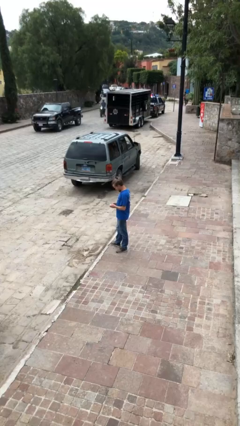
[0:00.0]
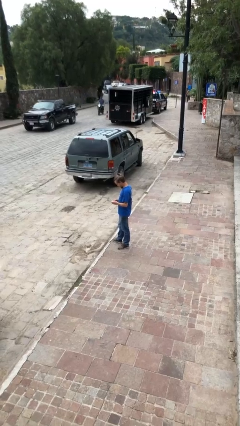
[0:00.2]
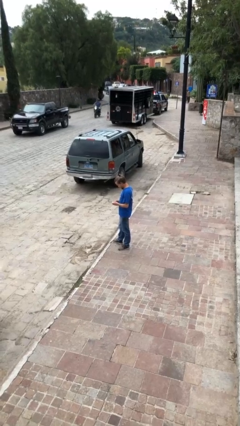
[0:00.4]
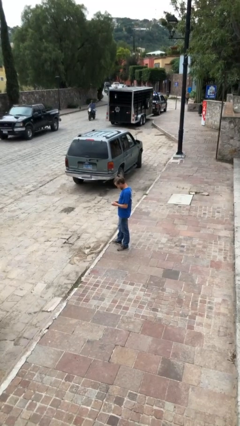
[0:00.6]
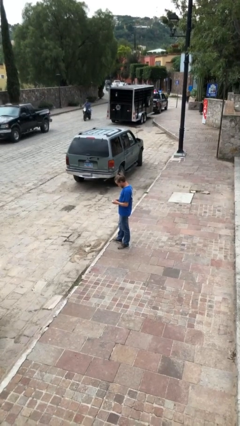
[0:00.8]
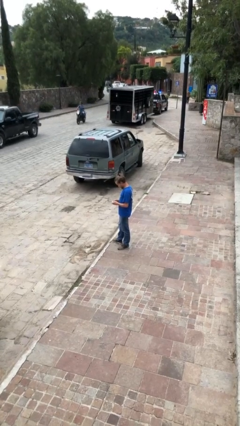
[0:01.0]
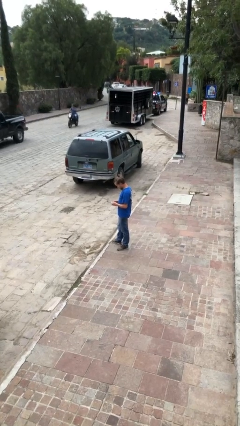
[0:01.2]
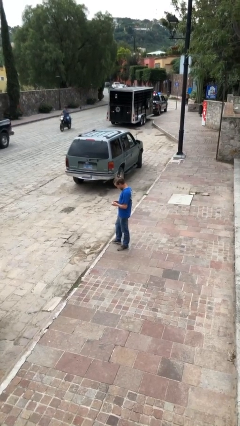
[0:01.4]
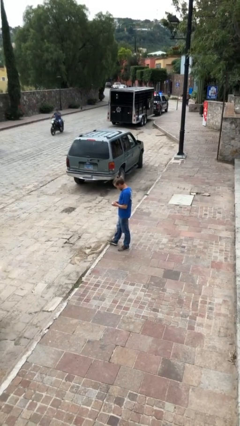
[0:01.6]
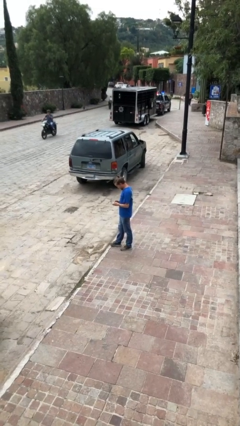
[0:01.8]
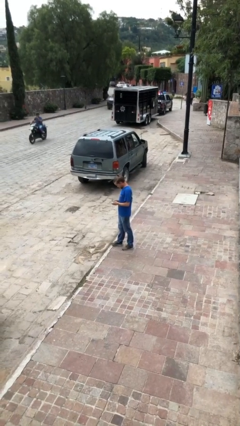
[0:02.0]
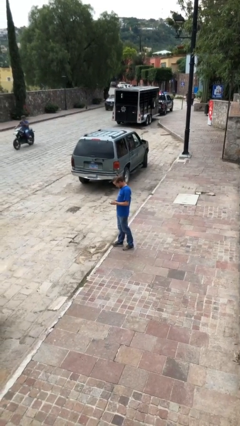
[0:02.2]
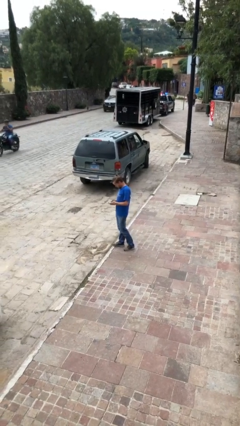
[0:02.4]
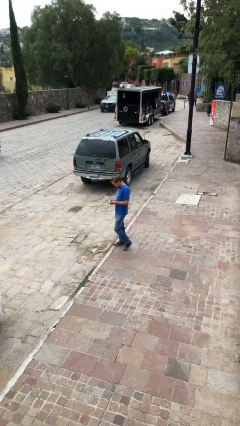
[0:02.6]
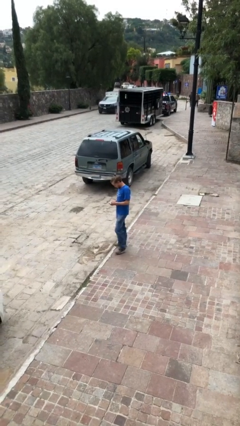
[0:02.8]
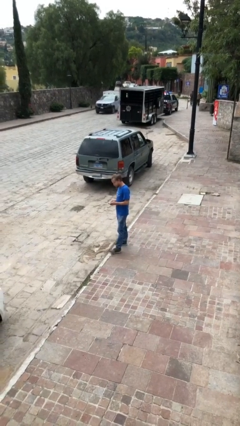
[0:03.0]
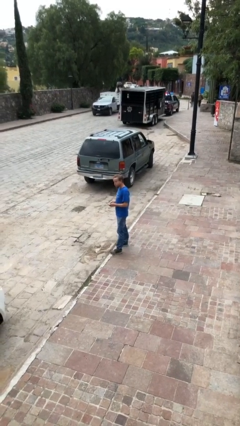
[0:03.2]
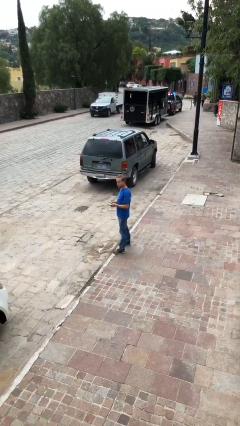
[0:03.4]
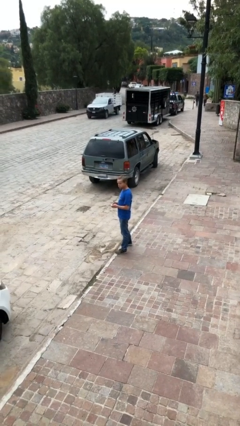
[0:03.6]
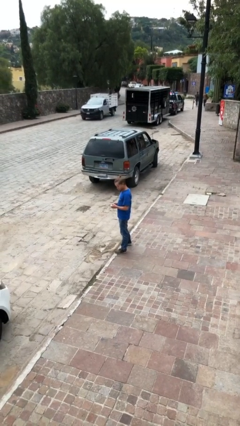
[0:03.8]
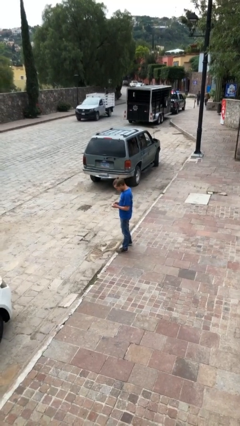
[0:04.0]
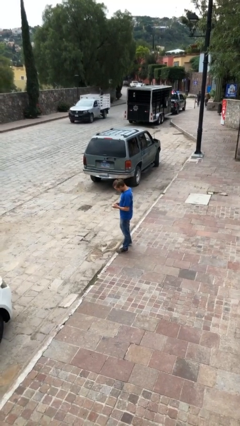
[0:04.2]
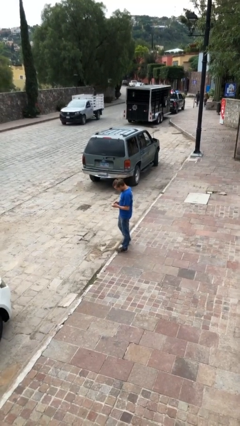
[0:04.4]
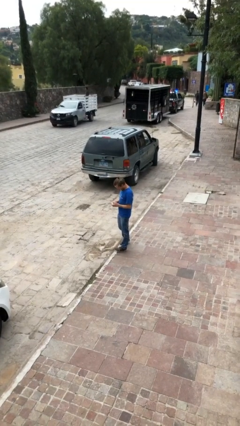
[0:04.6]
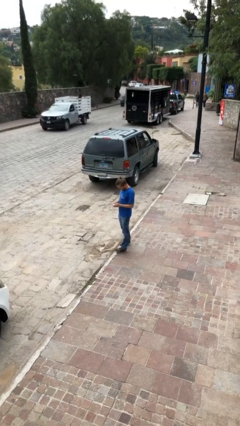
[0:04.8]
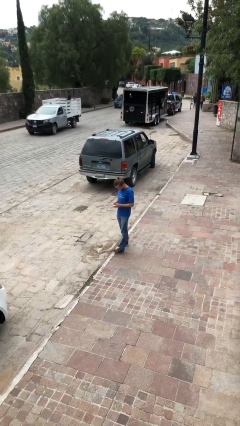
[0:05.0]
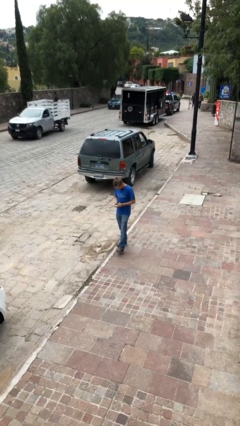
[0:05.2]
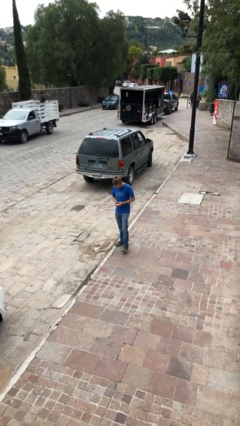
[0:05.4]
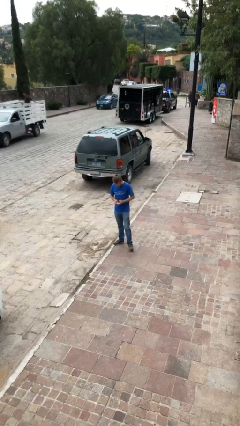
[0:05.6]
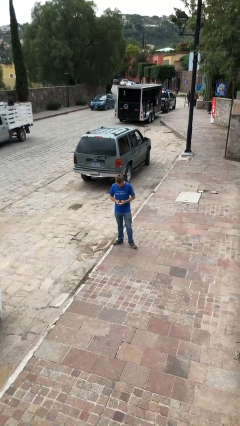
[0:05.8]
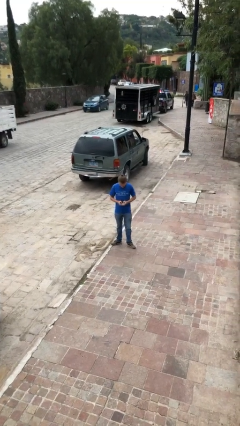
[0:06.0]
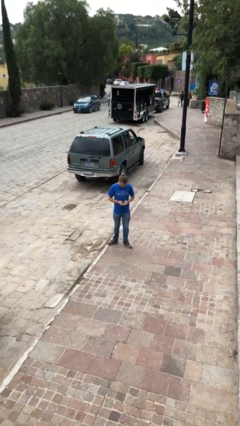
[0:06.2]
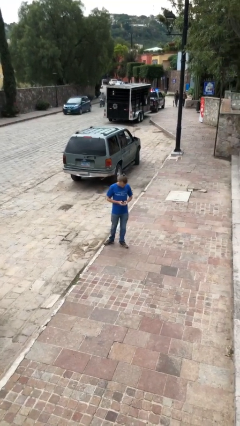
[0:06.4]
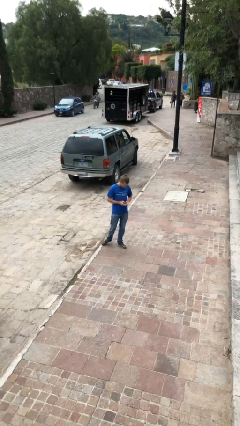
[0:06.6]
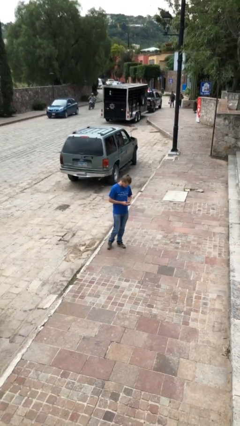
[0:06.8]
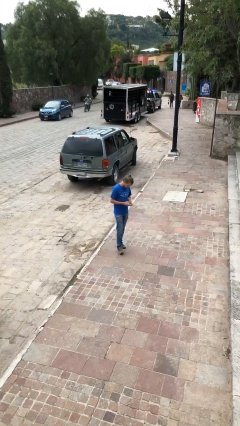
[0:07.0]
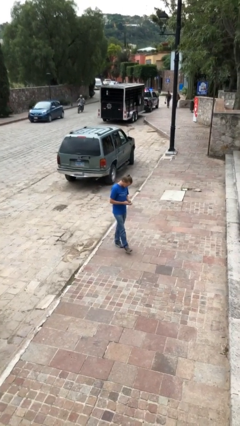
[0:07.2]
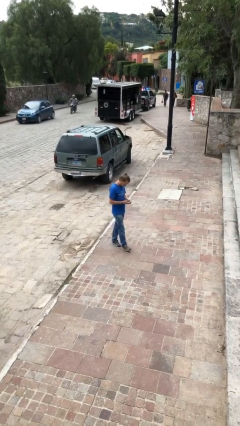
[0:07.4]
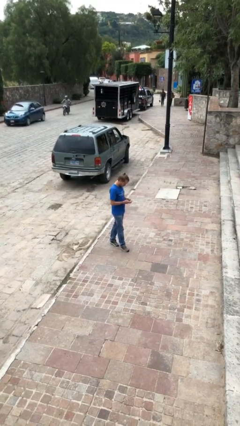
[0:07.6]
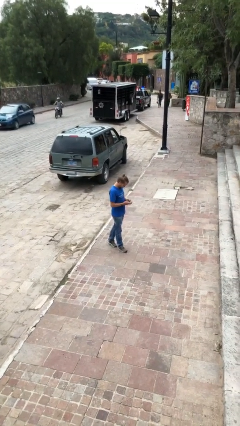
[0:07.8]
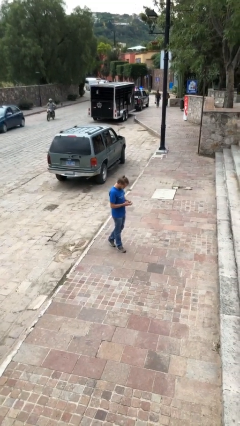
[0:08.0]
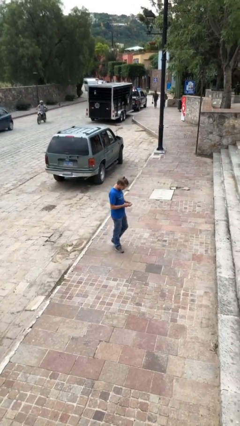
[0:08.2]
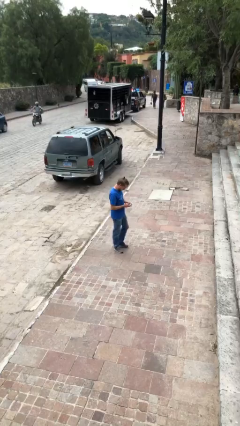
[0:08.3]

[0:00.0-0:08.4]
person texts on phone

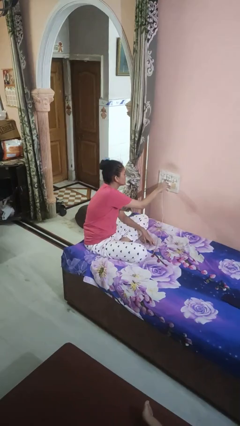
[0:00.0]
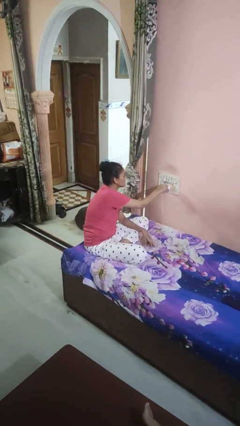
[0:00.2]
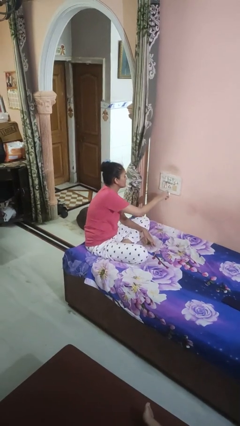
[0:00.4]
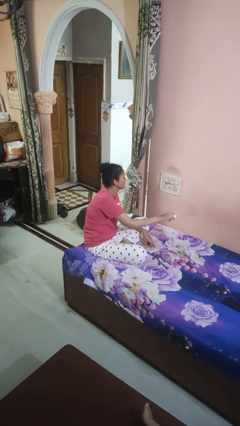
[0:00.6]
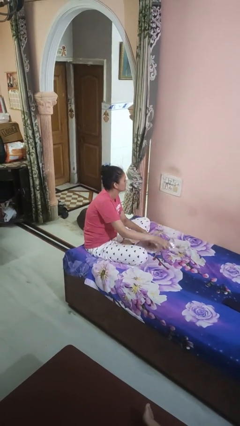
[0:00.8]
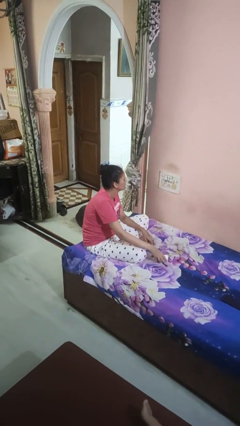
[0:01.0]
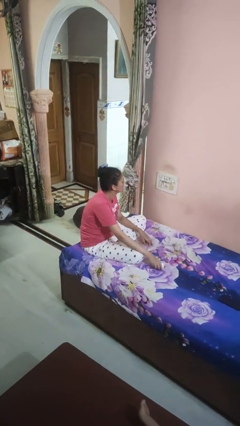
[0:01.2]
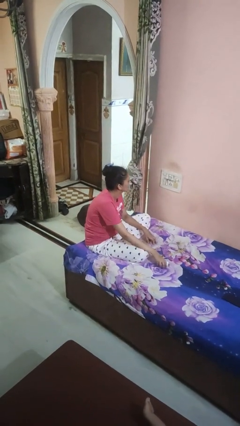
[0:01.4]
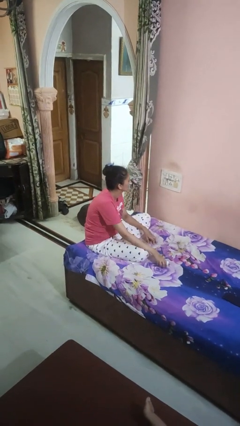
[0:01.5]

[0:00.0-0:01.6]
person unplugs from electrical socket

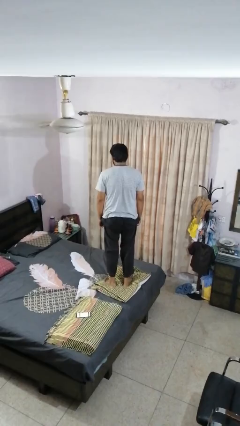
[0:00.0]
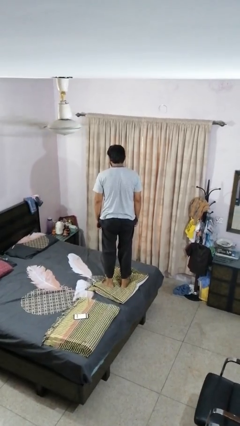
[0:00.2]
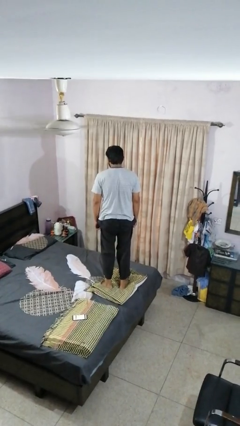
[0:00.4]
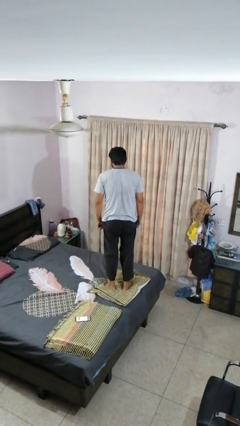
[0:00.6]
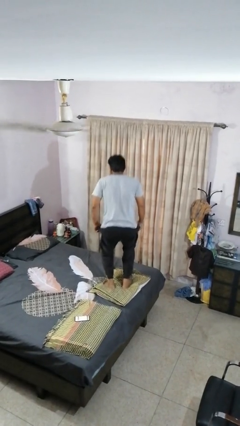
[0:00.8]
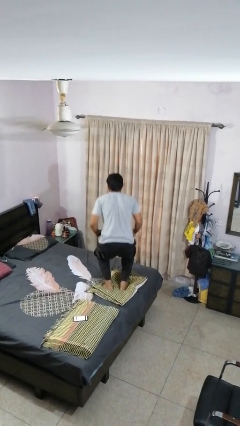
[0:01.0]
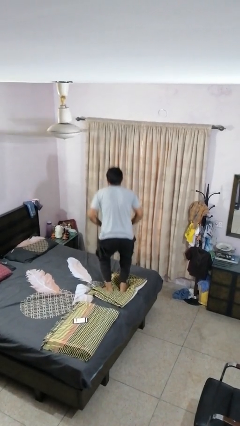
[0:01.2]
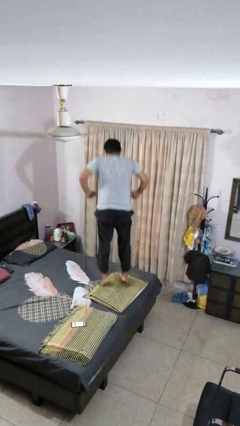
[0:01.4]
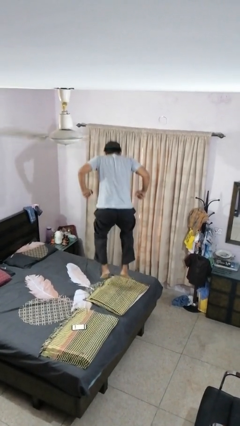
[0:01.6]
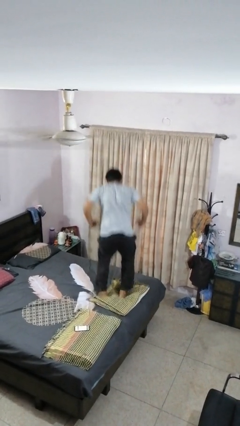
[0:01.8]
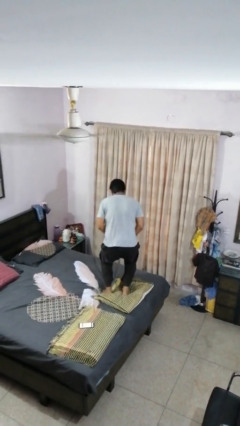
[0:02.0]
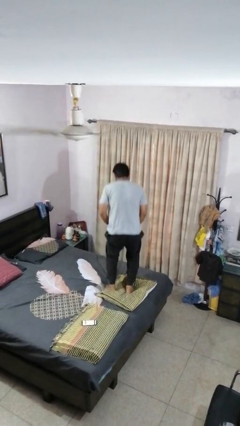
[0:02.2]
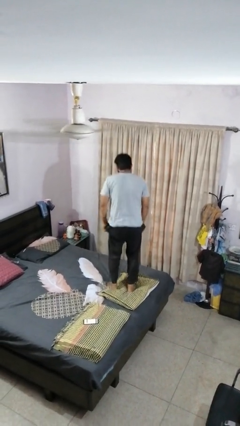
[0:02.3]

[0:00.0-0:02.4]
person jumps on bed

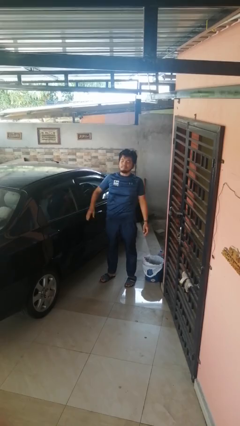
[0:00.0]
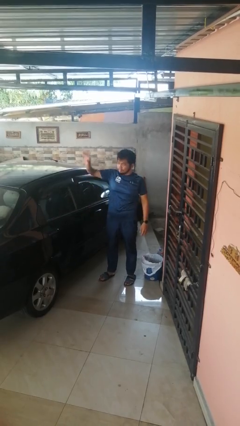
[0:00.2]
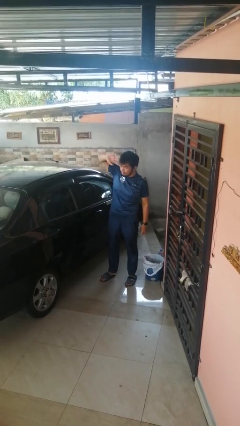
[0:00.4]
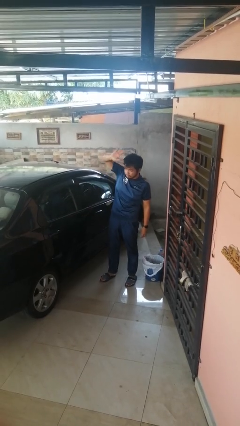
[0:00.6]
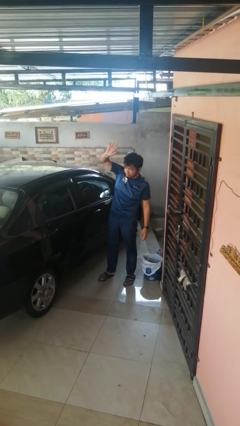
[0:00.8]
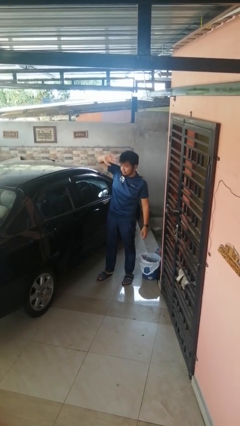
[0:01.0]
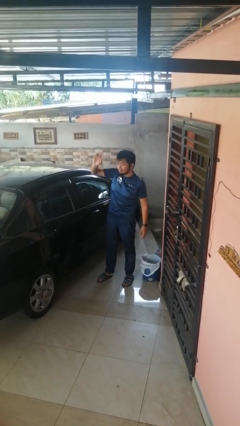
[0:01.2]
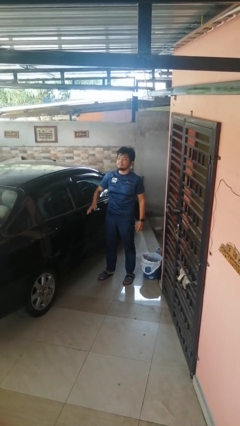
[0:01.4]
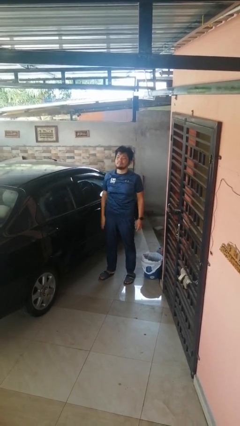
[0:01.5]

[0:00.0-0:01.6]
person waves at person

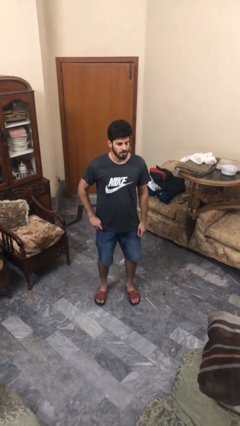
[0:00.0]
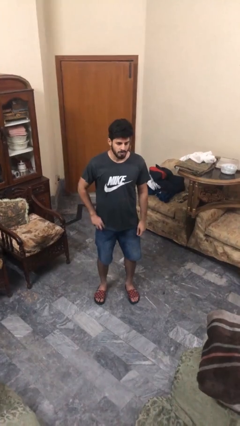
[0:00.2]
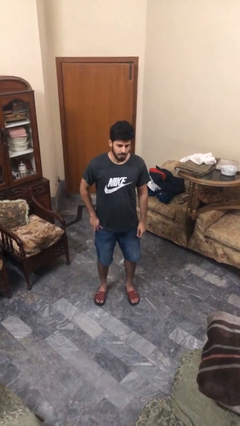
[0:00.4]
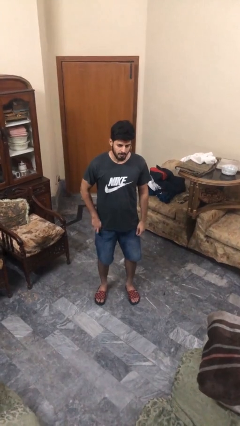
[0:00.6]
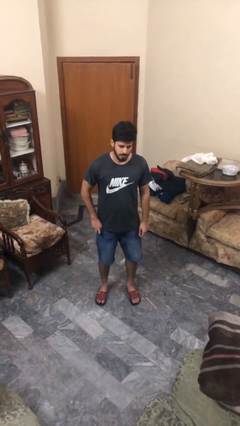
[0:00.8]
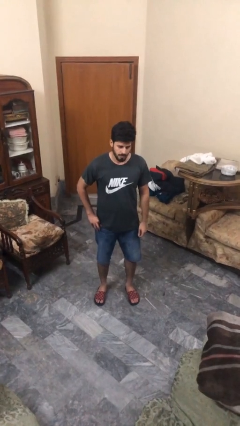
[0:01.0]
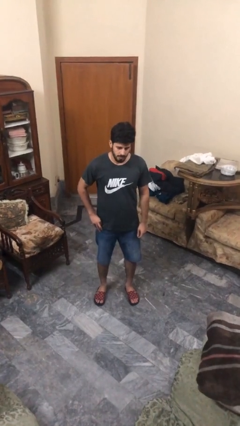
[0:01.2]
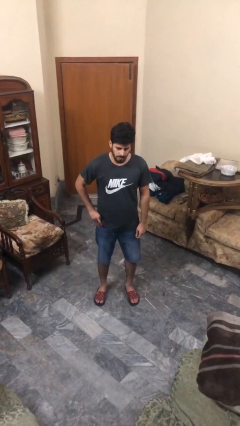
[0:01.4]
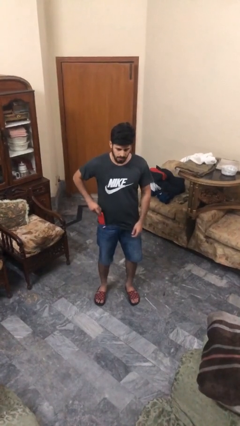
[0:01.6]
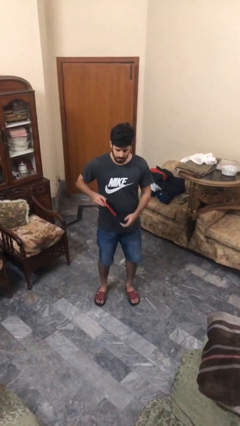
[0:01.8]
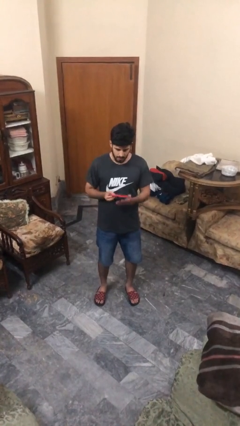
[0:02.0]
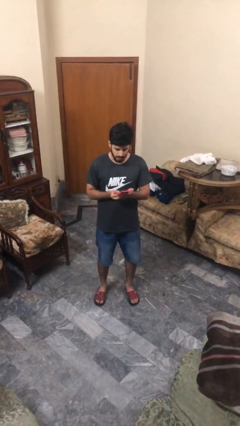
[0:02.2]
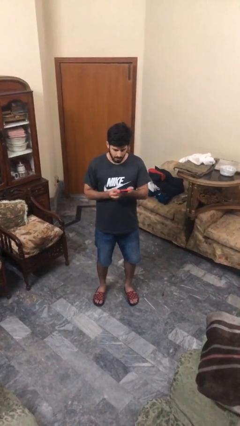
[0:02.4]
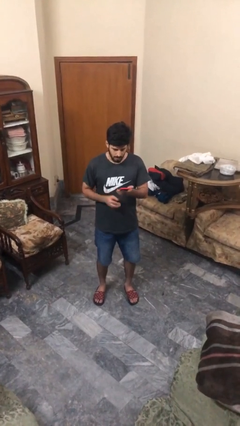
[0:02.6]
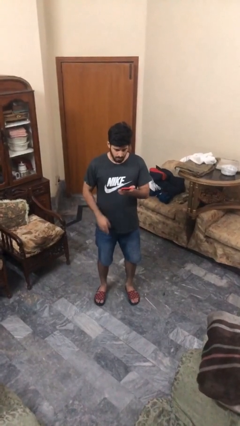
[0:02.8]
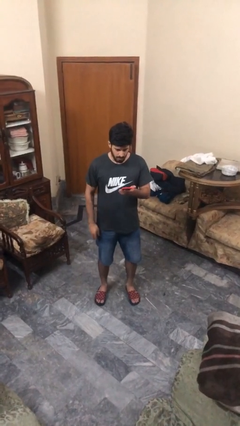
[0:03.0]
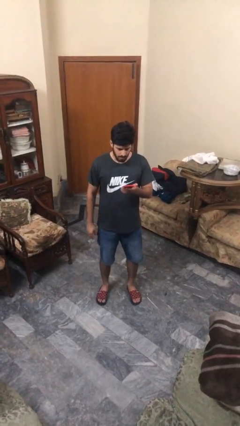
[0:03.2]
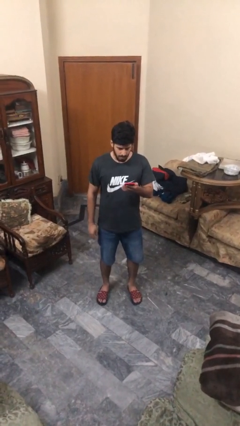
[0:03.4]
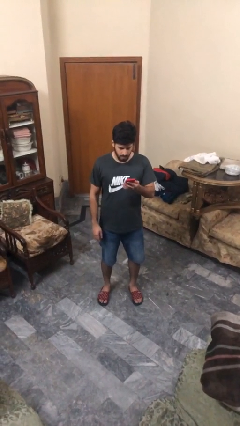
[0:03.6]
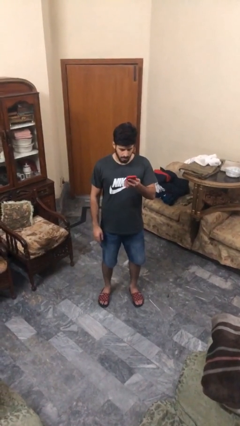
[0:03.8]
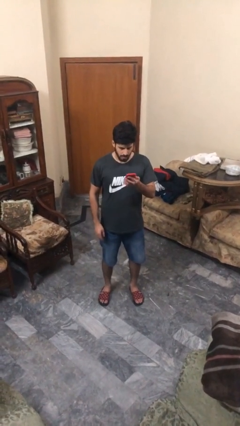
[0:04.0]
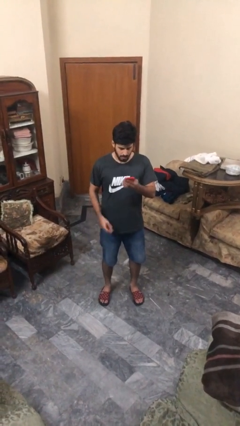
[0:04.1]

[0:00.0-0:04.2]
person takes phone from pocket
